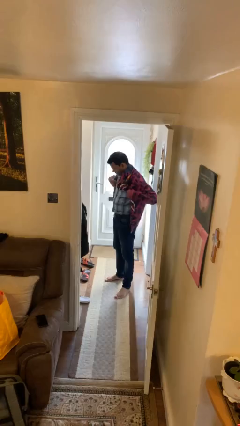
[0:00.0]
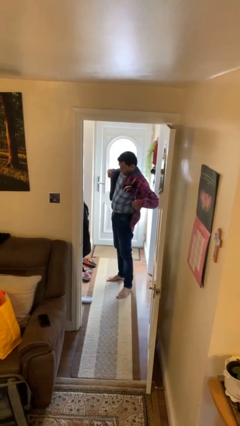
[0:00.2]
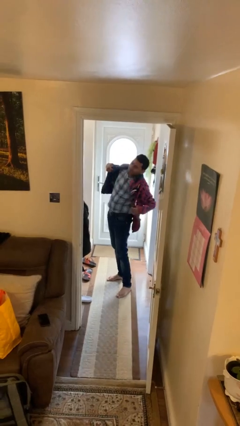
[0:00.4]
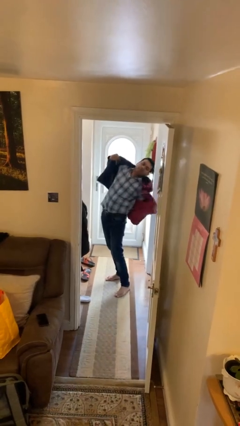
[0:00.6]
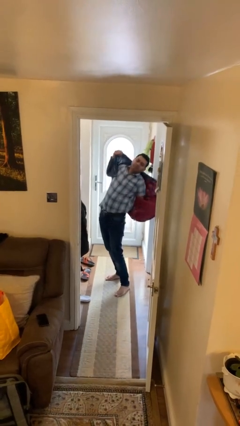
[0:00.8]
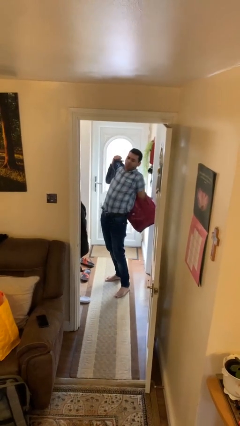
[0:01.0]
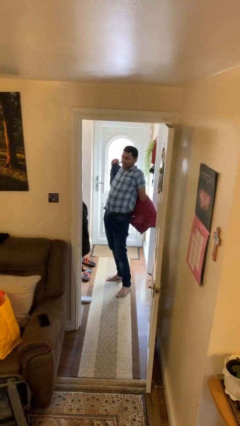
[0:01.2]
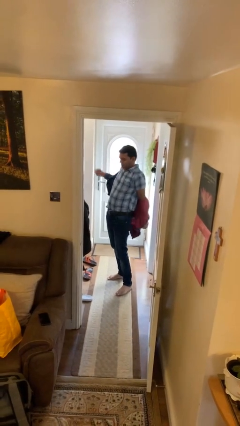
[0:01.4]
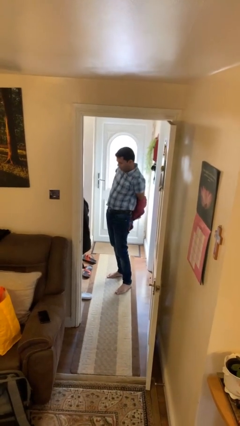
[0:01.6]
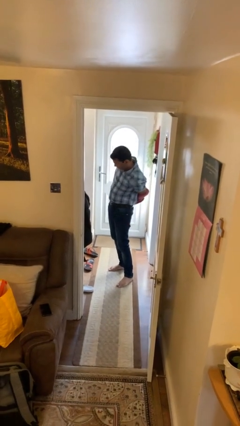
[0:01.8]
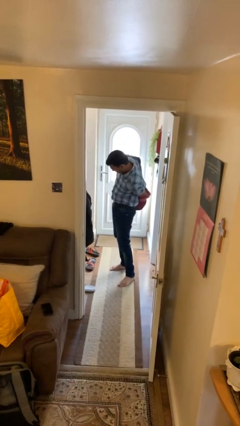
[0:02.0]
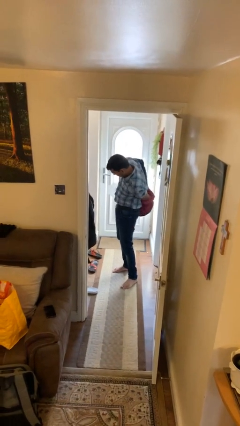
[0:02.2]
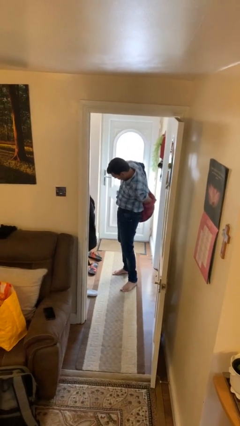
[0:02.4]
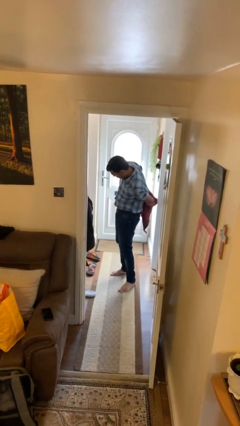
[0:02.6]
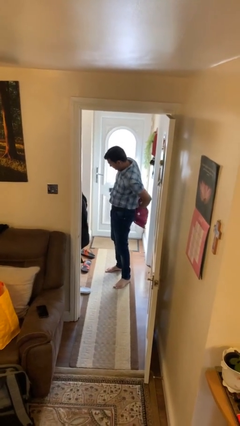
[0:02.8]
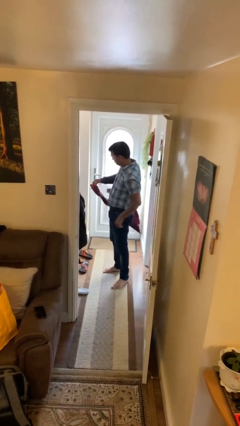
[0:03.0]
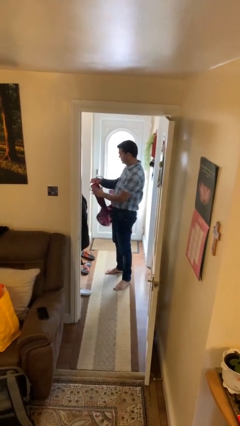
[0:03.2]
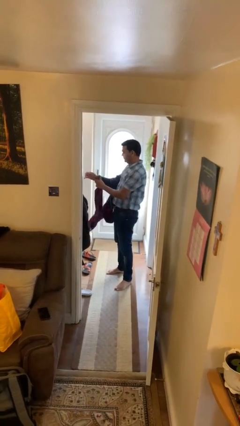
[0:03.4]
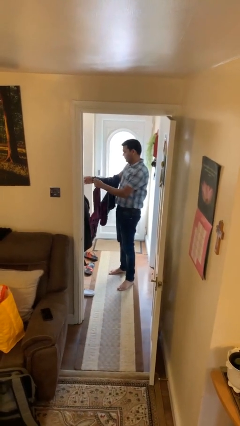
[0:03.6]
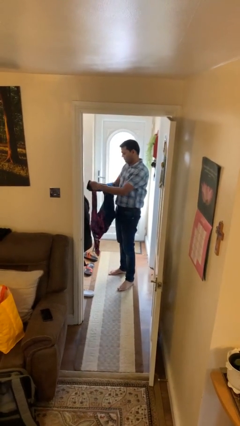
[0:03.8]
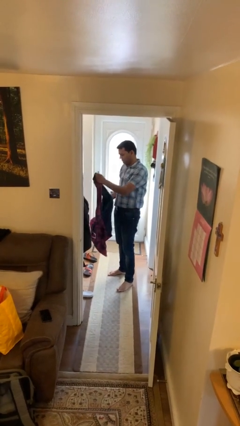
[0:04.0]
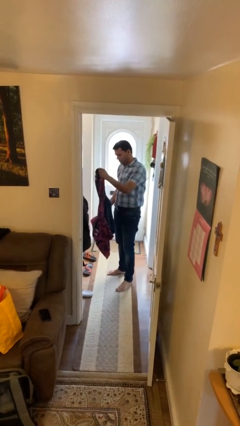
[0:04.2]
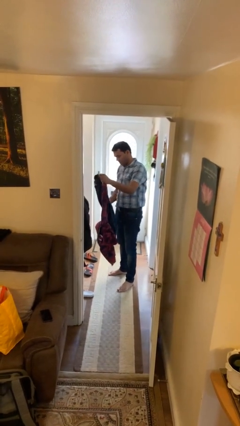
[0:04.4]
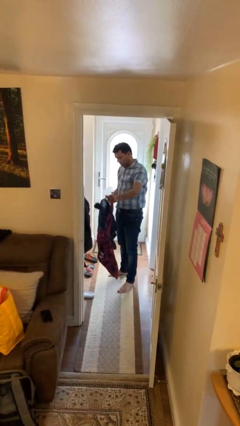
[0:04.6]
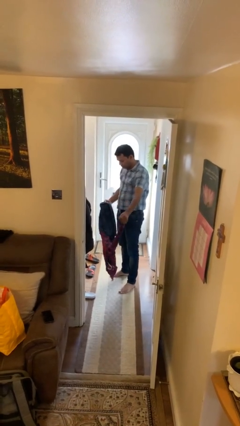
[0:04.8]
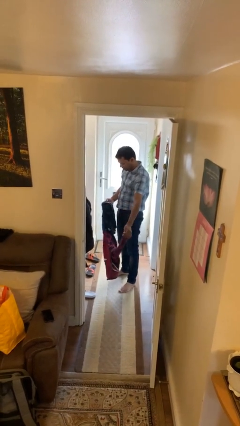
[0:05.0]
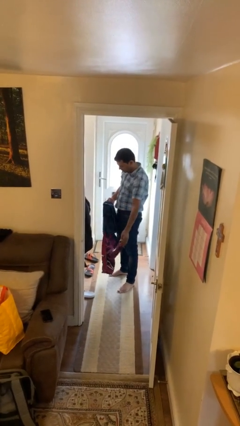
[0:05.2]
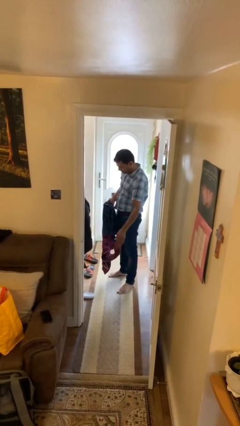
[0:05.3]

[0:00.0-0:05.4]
person takes off hoodie

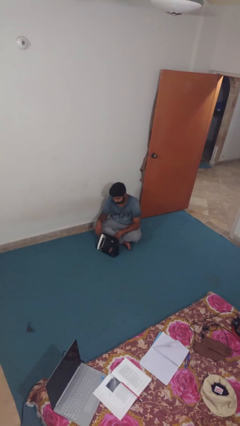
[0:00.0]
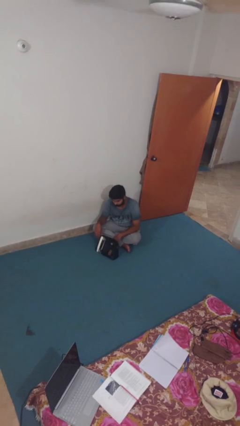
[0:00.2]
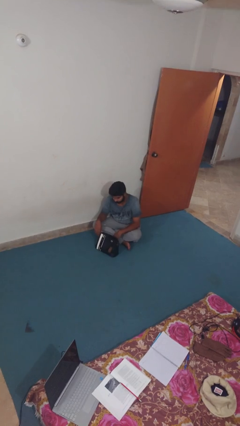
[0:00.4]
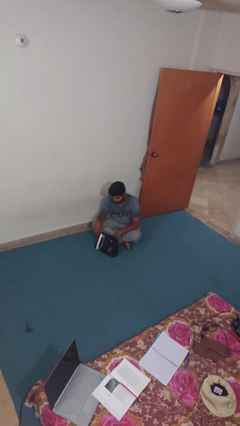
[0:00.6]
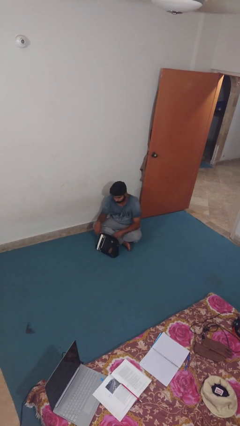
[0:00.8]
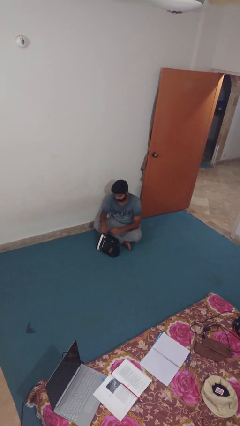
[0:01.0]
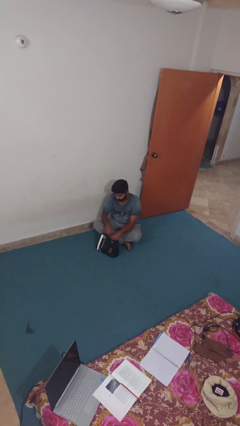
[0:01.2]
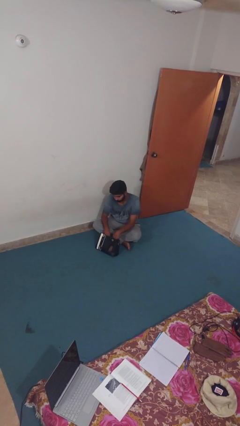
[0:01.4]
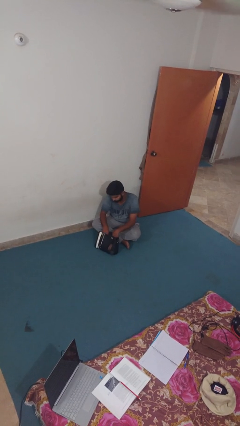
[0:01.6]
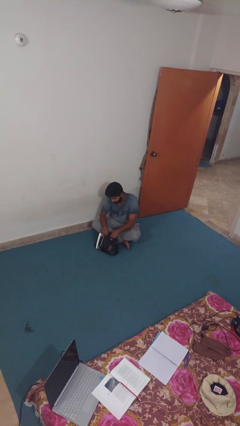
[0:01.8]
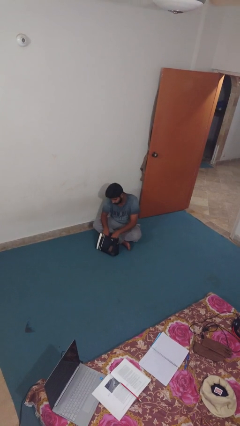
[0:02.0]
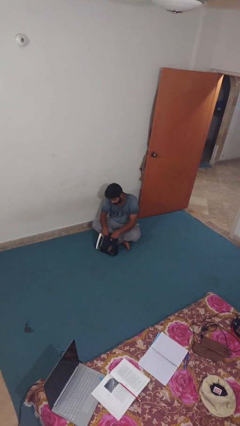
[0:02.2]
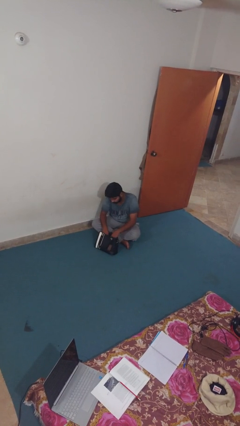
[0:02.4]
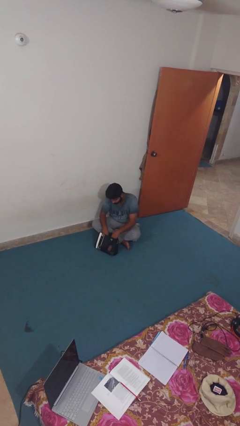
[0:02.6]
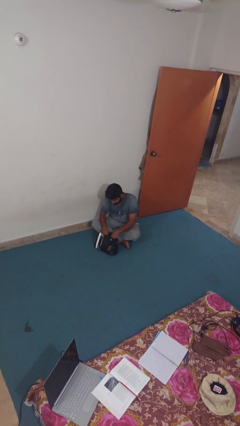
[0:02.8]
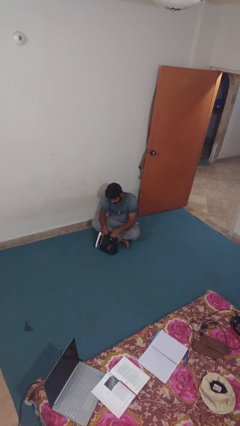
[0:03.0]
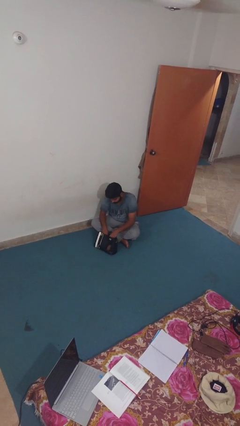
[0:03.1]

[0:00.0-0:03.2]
person searches in purse

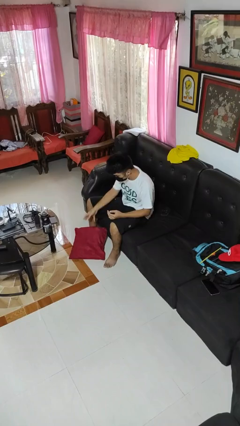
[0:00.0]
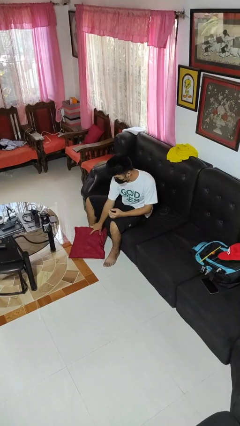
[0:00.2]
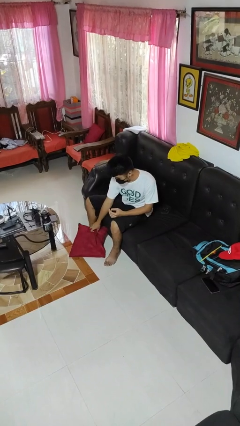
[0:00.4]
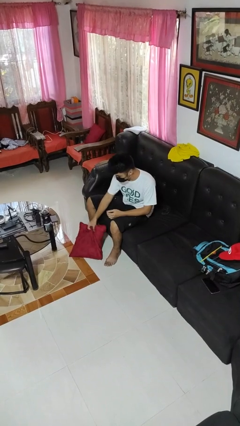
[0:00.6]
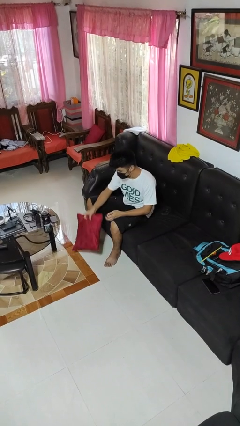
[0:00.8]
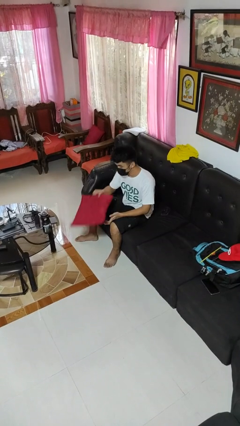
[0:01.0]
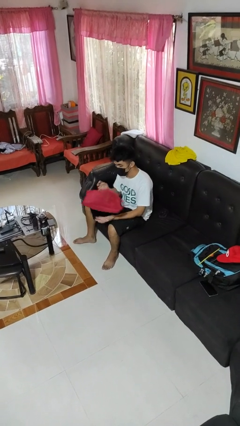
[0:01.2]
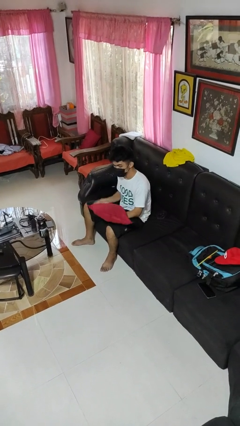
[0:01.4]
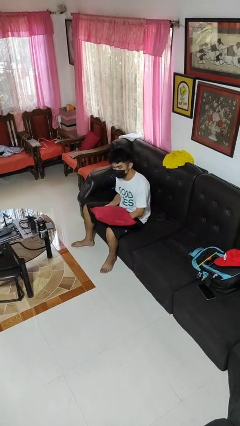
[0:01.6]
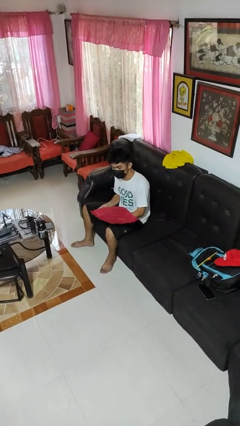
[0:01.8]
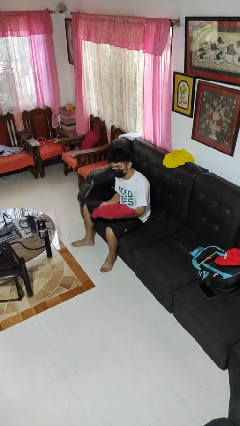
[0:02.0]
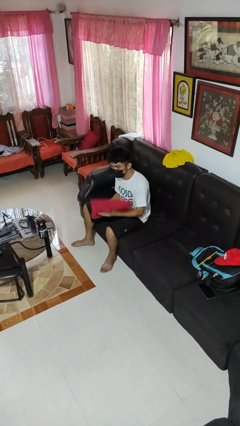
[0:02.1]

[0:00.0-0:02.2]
person picks up object from floor

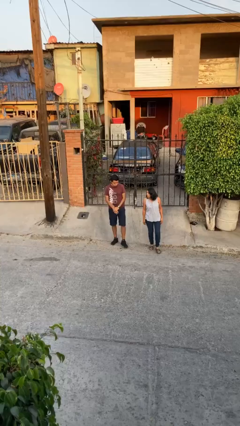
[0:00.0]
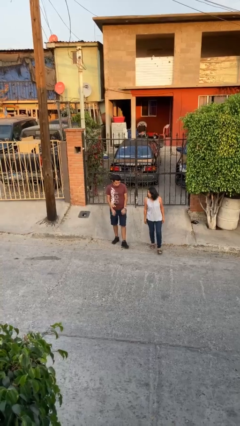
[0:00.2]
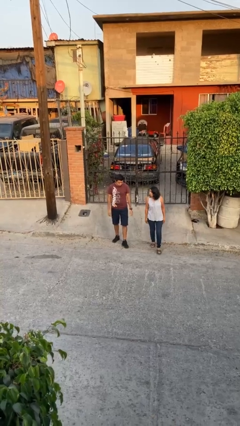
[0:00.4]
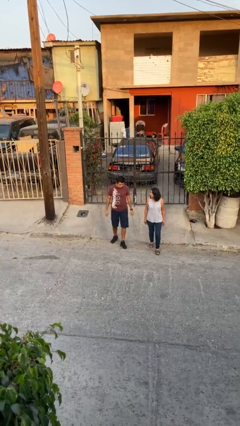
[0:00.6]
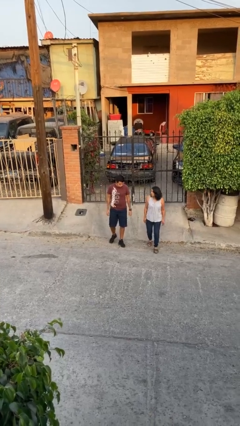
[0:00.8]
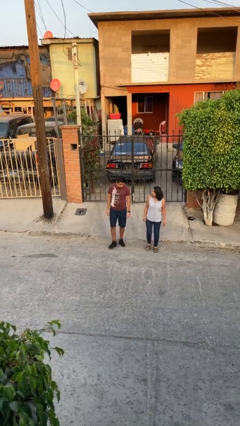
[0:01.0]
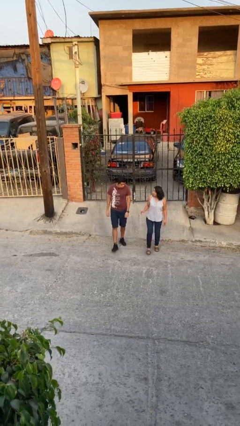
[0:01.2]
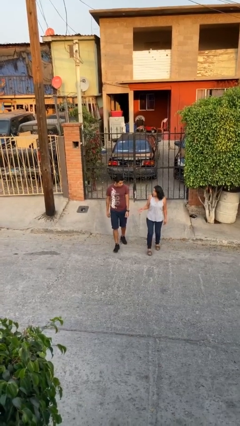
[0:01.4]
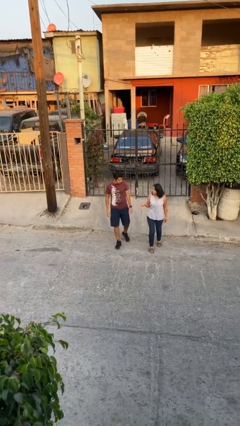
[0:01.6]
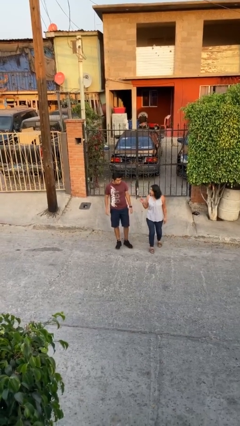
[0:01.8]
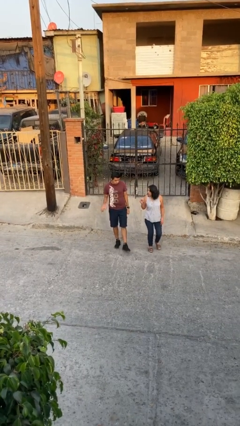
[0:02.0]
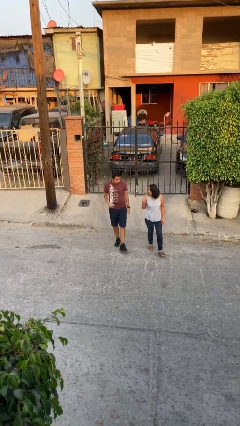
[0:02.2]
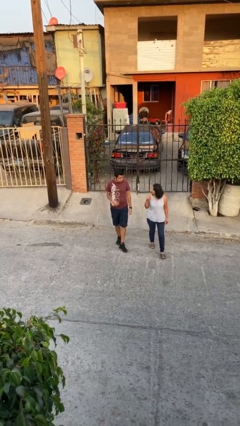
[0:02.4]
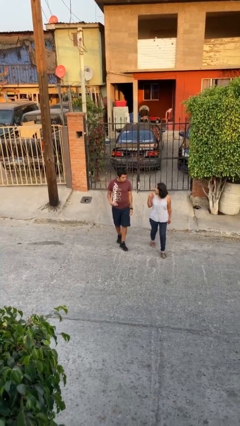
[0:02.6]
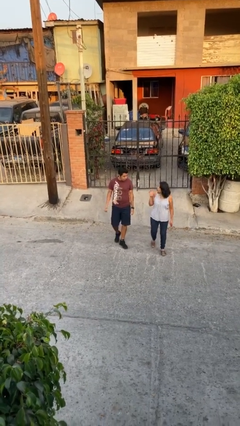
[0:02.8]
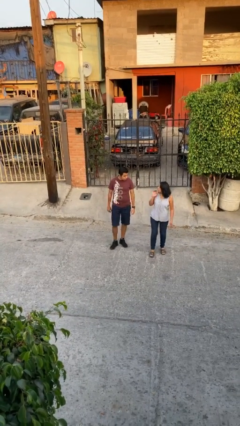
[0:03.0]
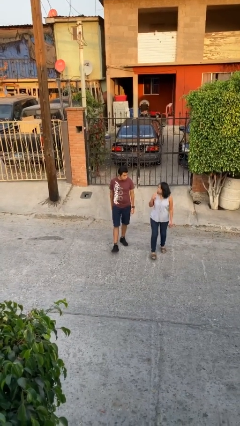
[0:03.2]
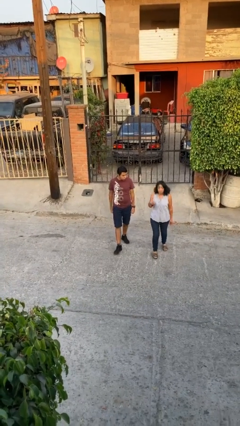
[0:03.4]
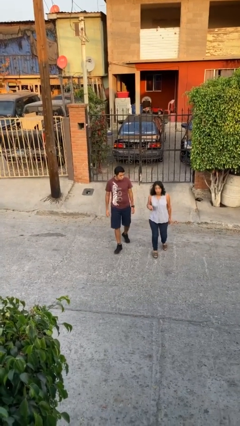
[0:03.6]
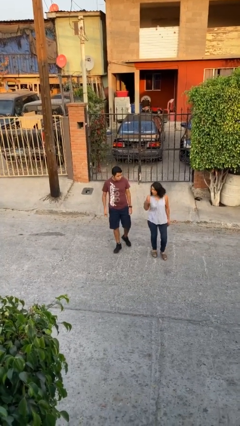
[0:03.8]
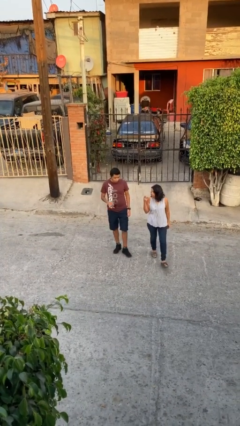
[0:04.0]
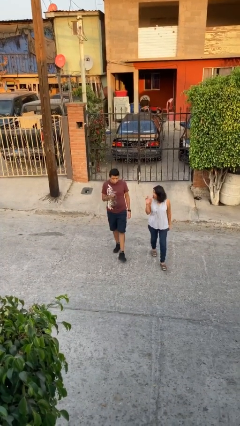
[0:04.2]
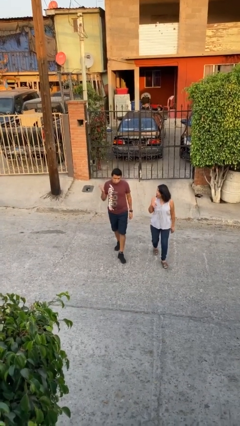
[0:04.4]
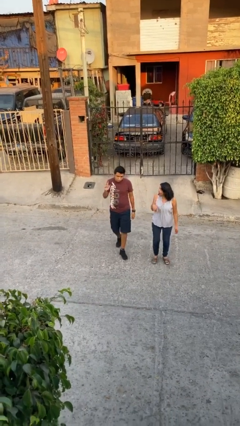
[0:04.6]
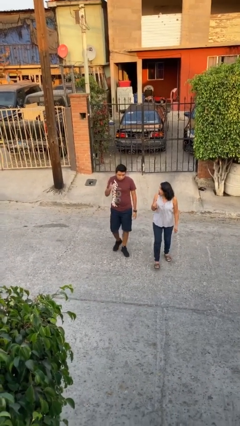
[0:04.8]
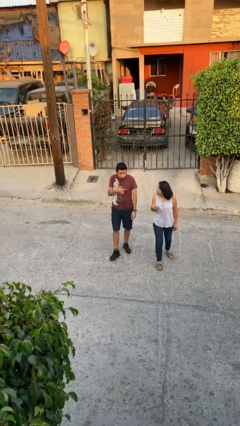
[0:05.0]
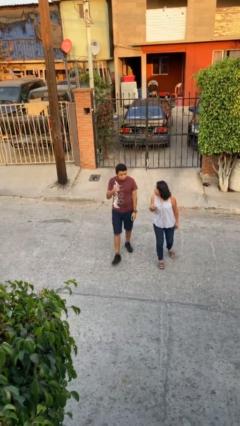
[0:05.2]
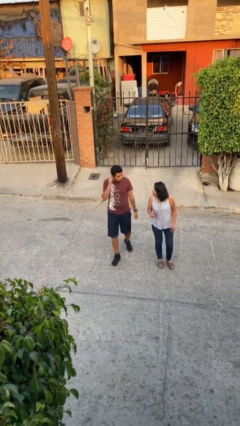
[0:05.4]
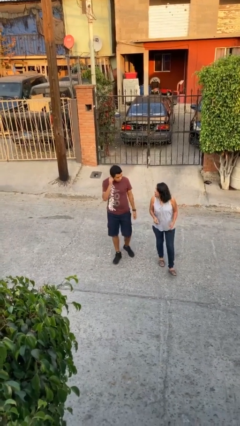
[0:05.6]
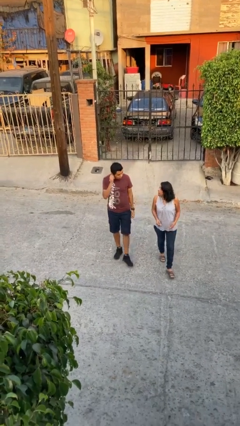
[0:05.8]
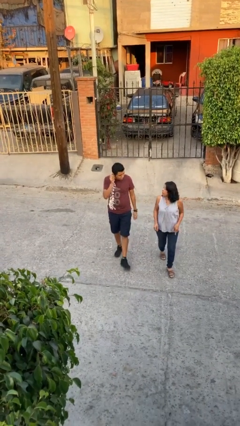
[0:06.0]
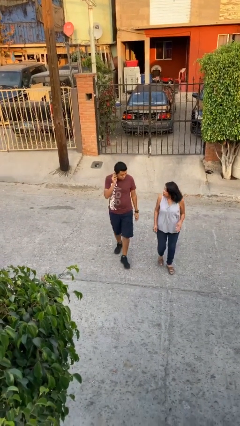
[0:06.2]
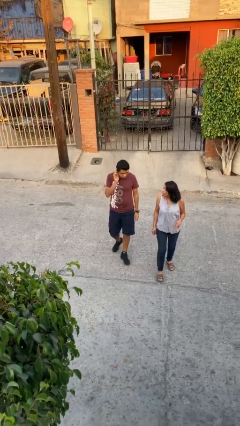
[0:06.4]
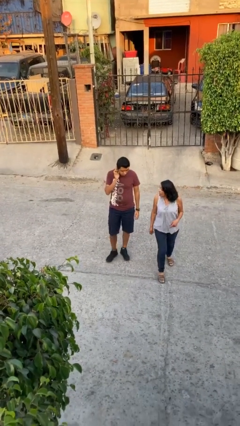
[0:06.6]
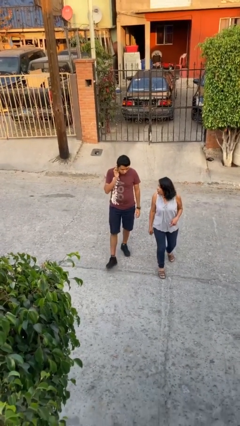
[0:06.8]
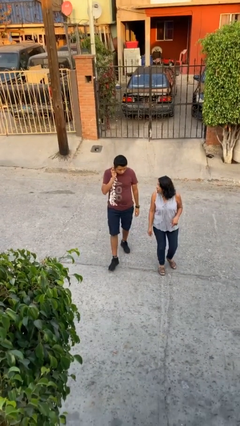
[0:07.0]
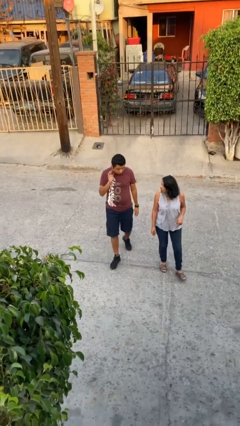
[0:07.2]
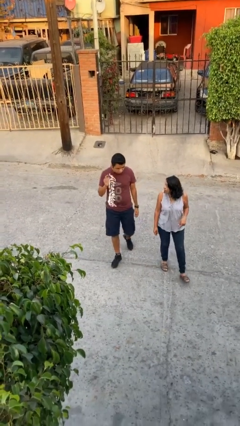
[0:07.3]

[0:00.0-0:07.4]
person talks to person
